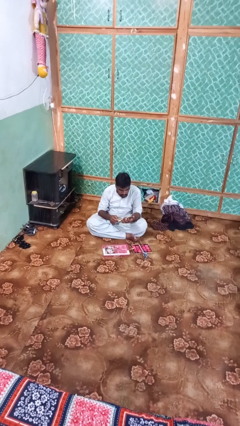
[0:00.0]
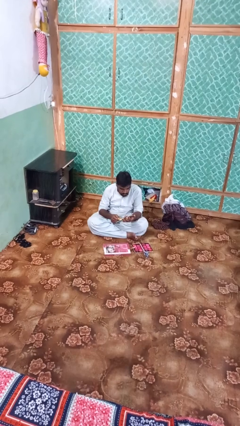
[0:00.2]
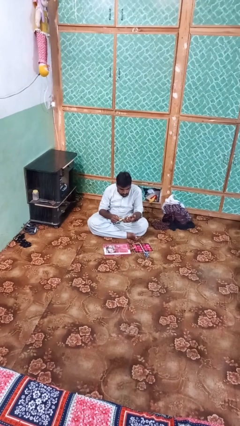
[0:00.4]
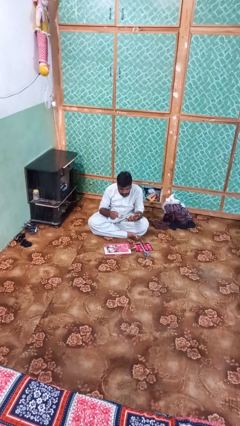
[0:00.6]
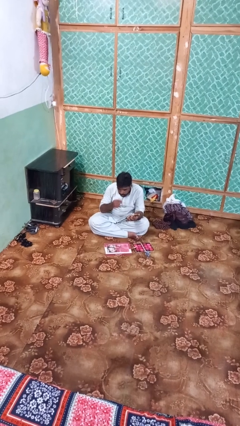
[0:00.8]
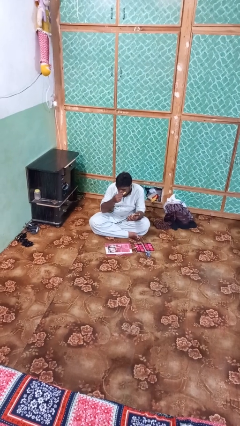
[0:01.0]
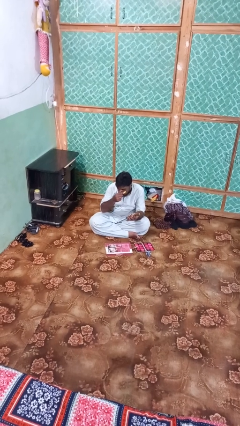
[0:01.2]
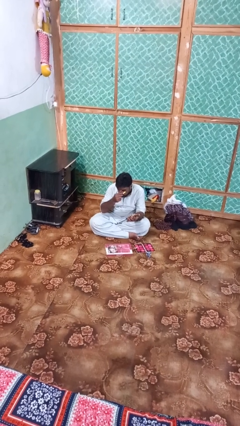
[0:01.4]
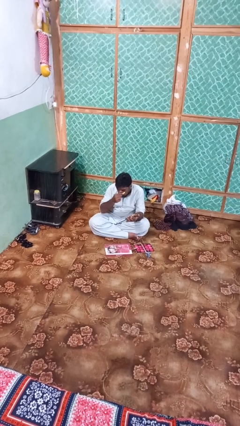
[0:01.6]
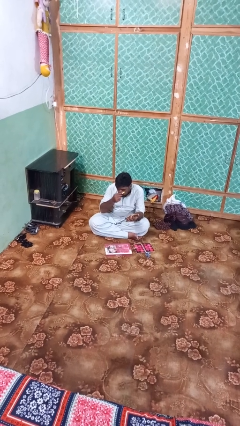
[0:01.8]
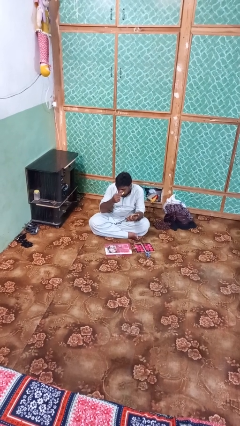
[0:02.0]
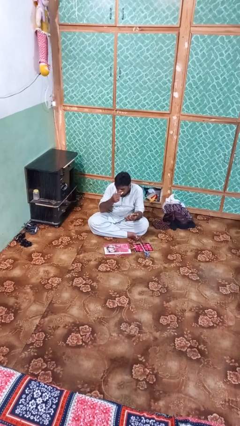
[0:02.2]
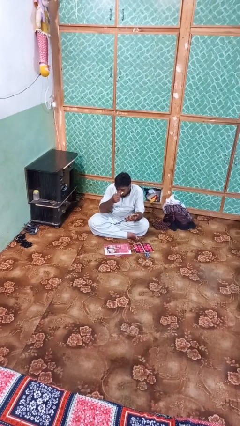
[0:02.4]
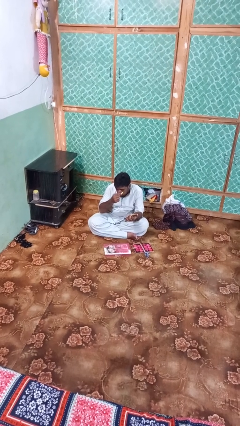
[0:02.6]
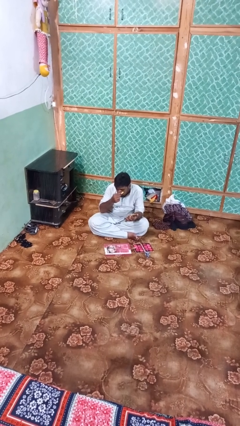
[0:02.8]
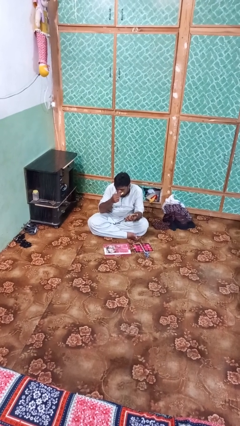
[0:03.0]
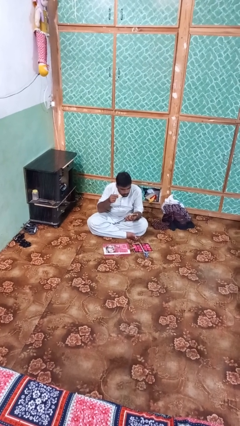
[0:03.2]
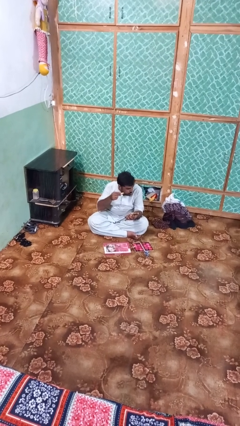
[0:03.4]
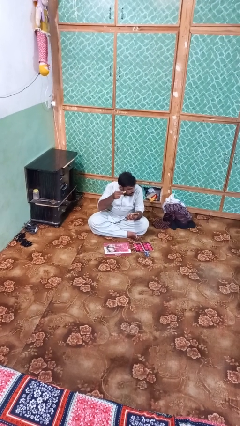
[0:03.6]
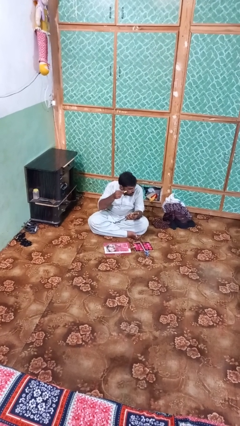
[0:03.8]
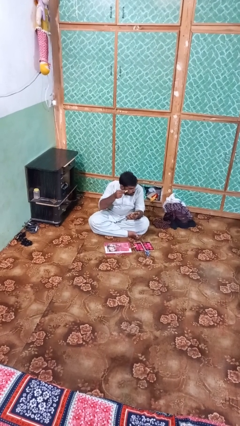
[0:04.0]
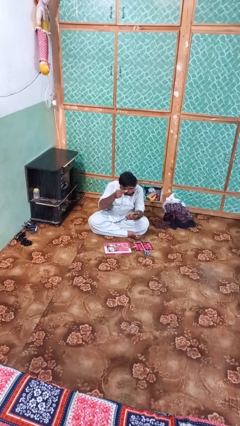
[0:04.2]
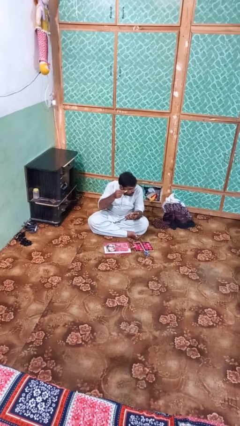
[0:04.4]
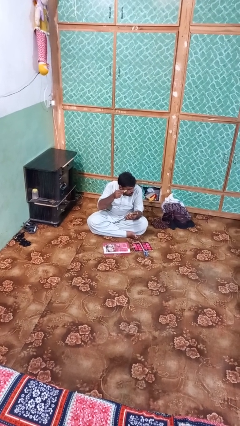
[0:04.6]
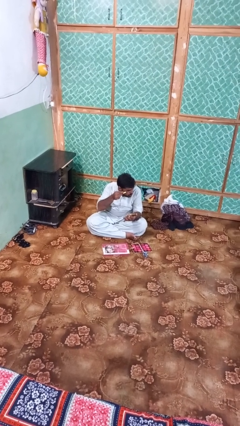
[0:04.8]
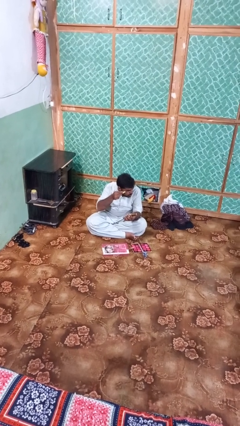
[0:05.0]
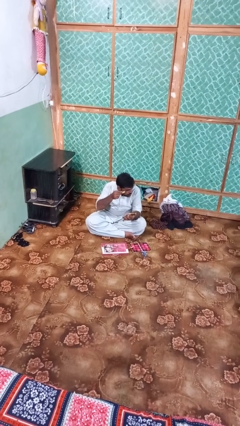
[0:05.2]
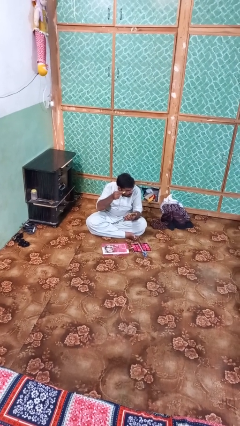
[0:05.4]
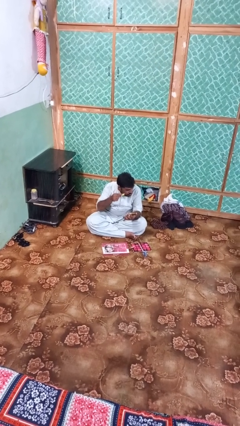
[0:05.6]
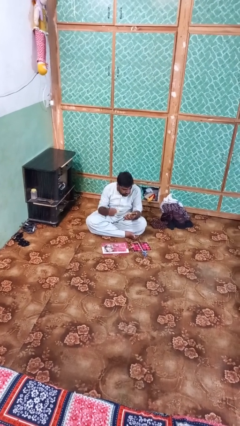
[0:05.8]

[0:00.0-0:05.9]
person applies eye makeup

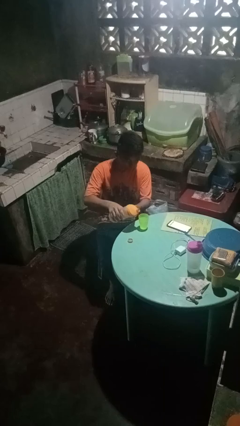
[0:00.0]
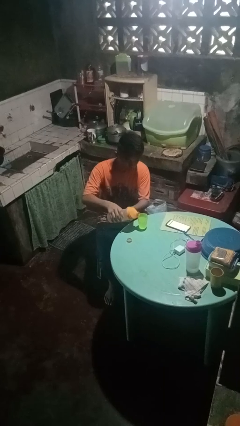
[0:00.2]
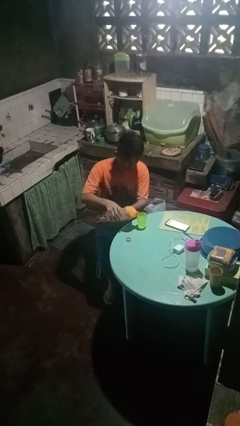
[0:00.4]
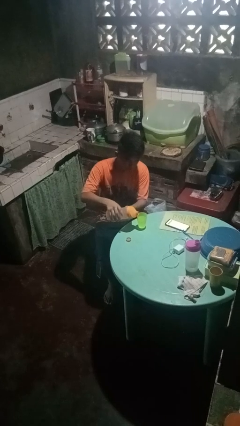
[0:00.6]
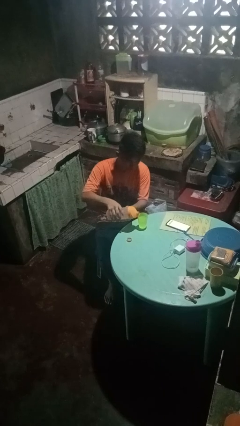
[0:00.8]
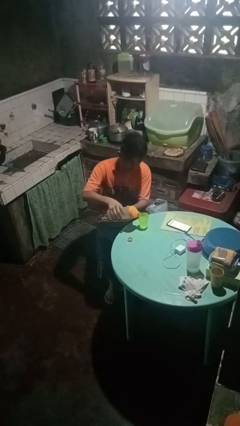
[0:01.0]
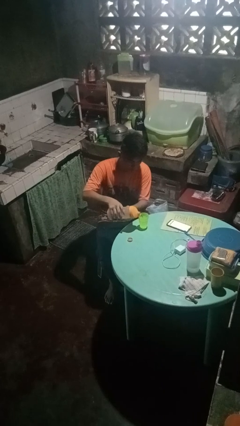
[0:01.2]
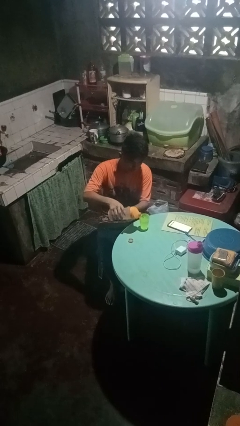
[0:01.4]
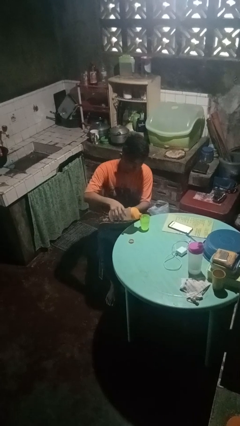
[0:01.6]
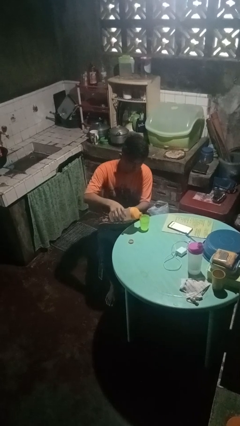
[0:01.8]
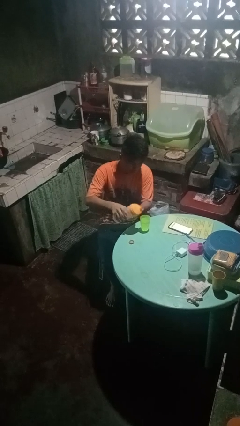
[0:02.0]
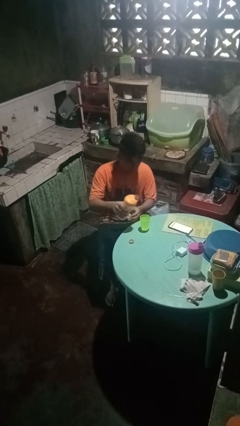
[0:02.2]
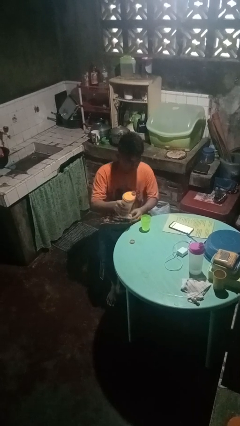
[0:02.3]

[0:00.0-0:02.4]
person pours liquid into cup

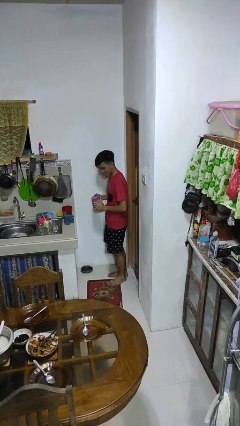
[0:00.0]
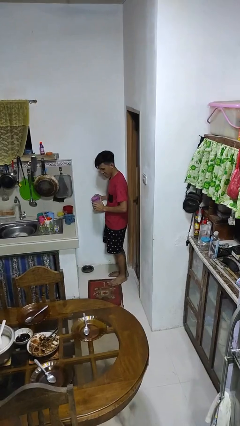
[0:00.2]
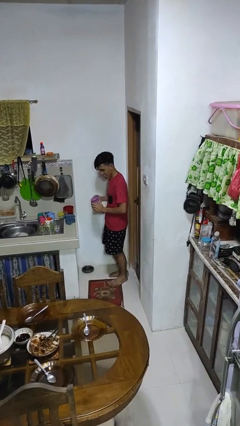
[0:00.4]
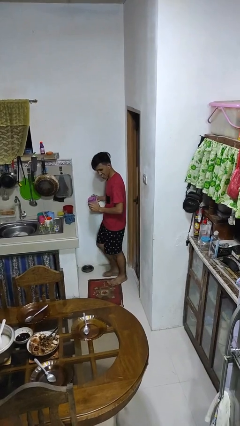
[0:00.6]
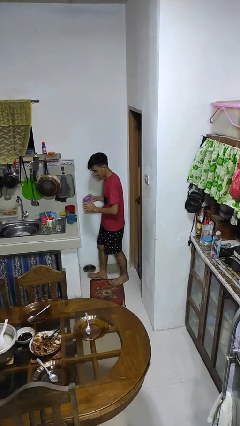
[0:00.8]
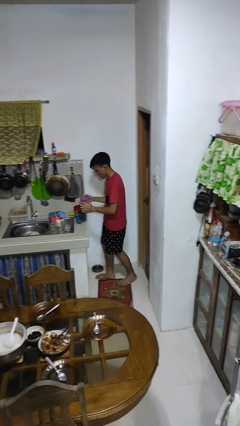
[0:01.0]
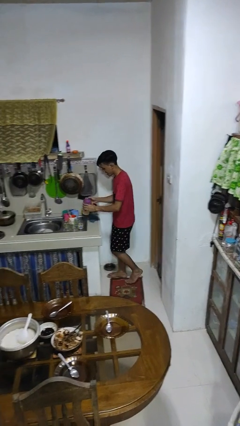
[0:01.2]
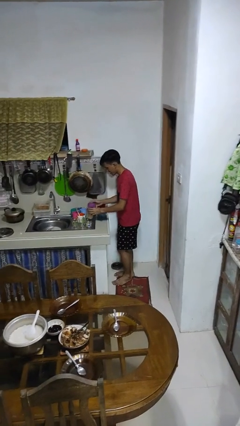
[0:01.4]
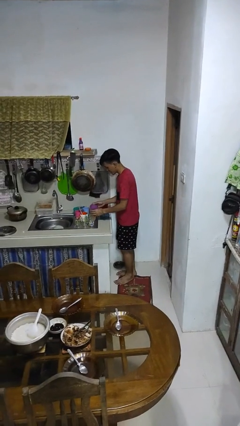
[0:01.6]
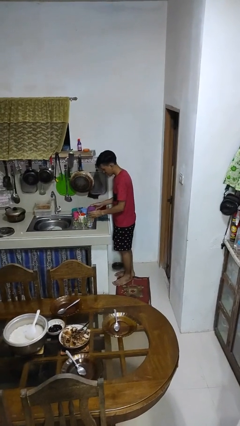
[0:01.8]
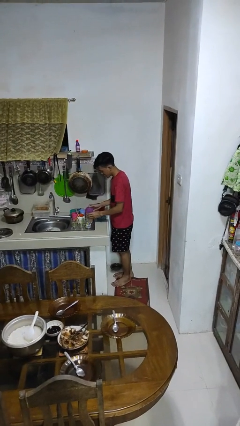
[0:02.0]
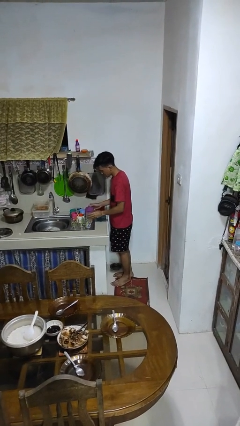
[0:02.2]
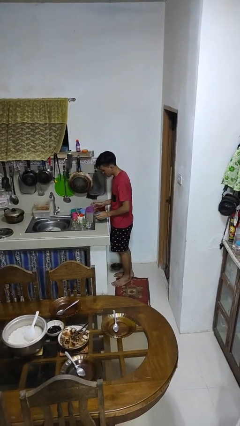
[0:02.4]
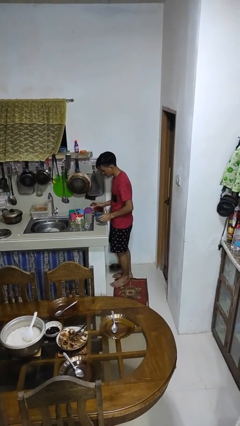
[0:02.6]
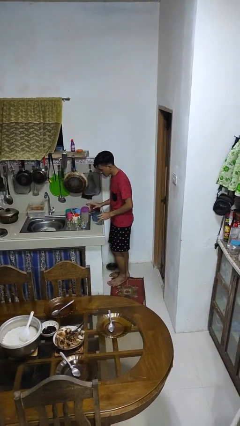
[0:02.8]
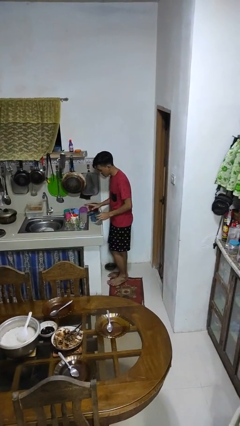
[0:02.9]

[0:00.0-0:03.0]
person puts down object on countertop

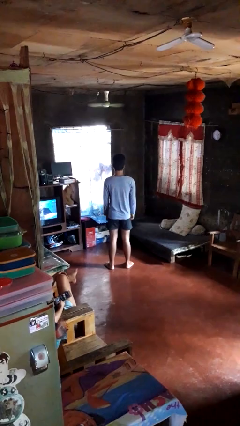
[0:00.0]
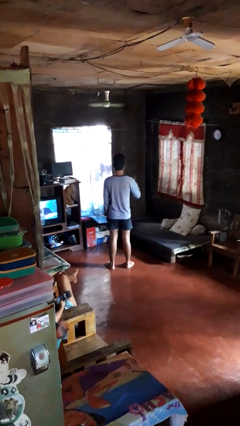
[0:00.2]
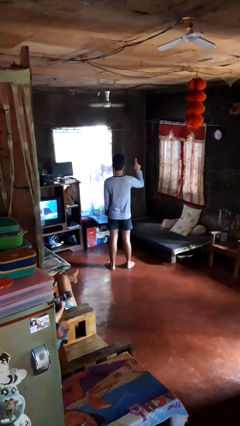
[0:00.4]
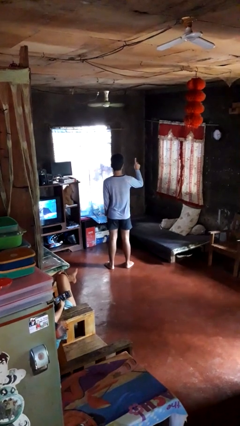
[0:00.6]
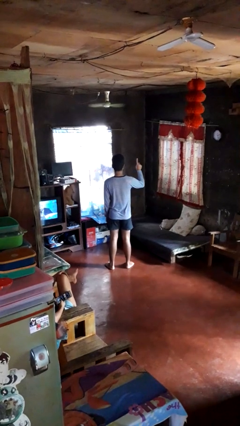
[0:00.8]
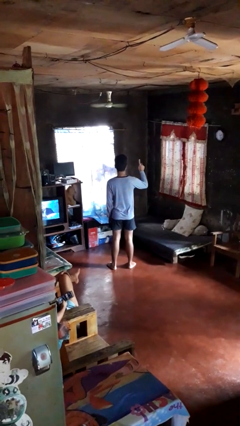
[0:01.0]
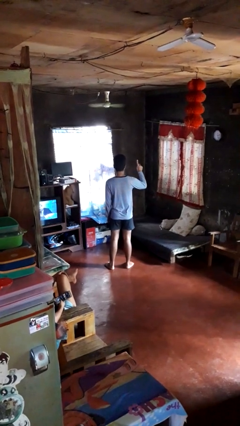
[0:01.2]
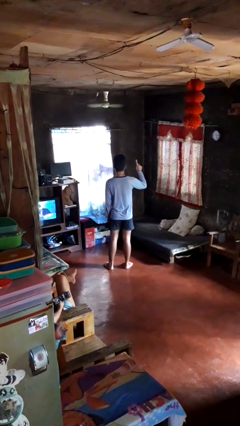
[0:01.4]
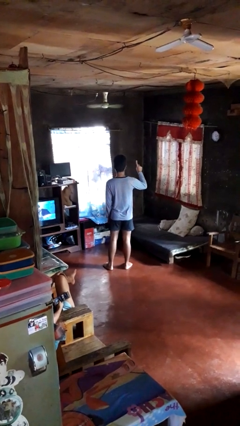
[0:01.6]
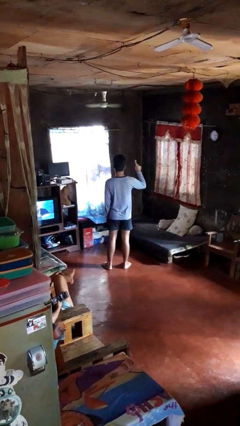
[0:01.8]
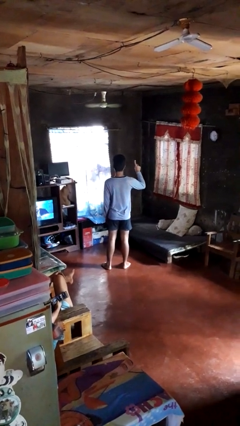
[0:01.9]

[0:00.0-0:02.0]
person gestures number one

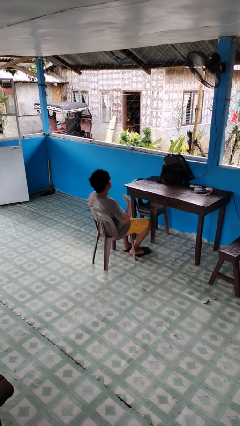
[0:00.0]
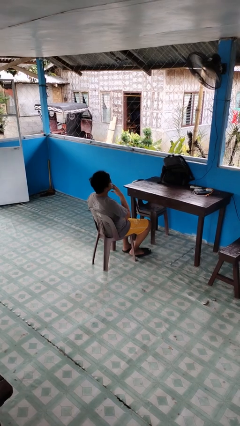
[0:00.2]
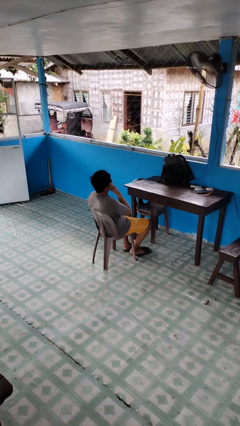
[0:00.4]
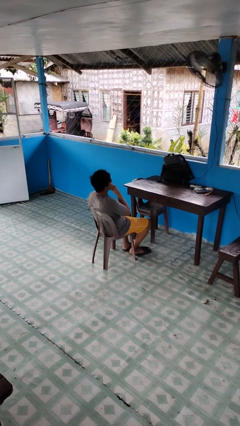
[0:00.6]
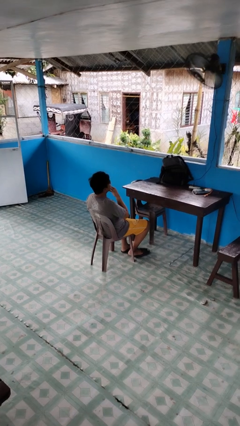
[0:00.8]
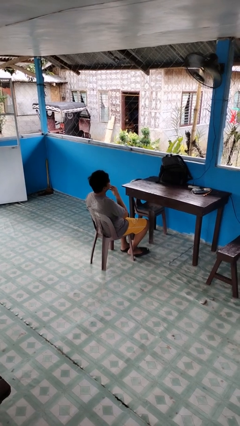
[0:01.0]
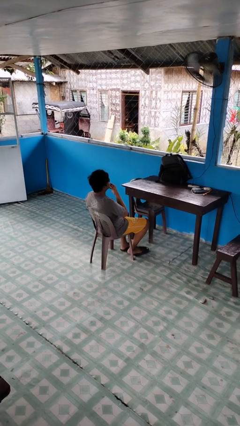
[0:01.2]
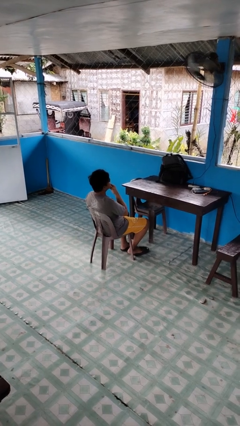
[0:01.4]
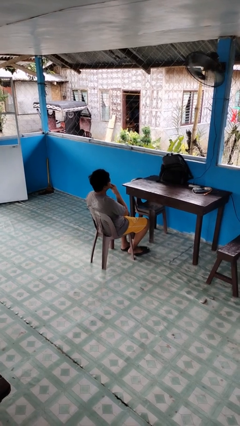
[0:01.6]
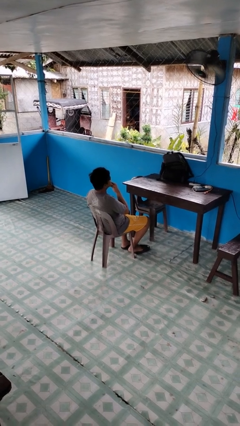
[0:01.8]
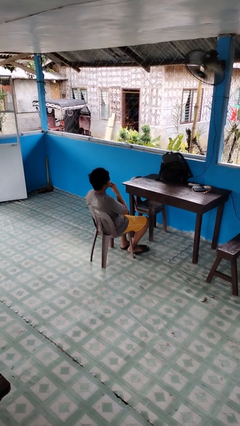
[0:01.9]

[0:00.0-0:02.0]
person strokes chin

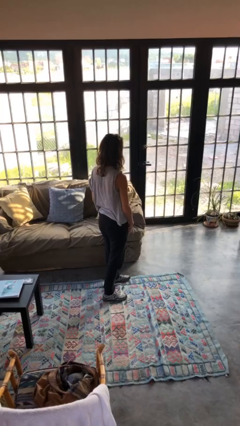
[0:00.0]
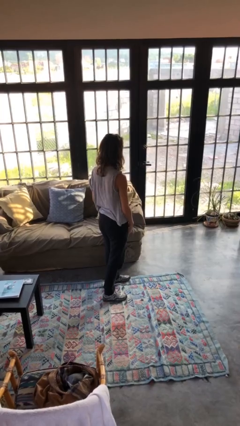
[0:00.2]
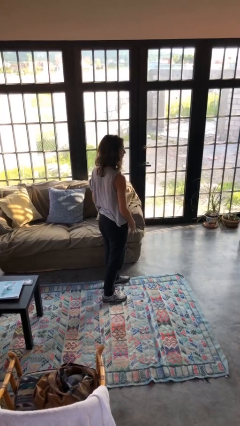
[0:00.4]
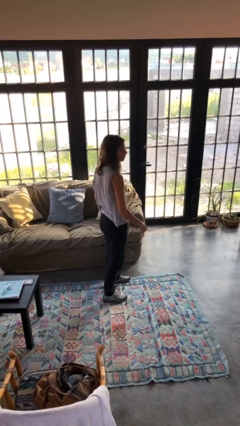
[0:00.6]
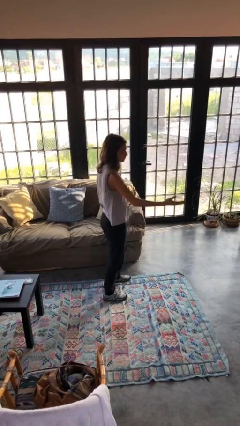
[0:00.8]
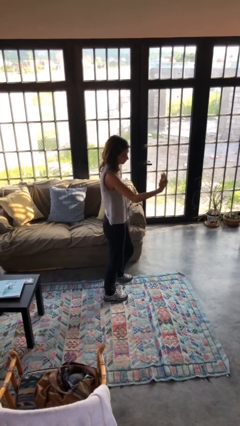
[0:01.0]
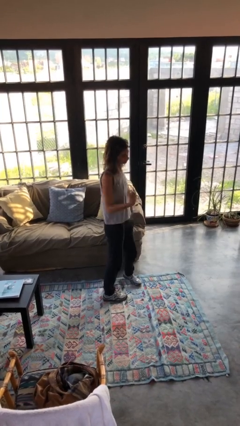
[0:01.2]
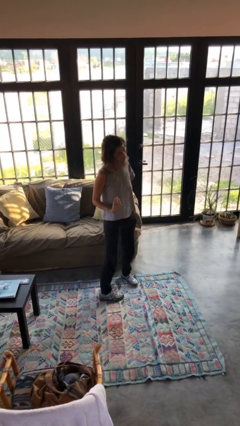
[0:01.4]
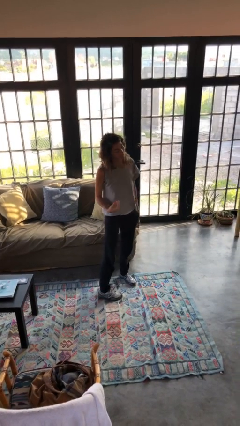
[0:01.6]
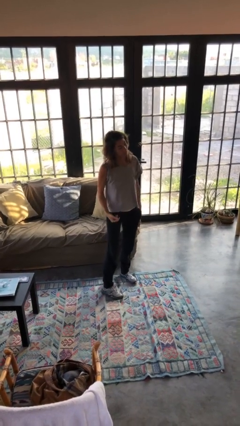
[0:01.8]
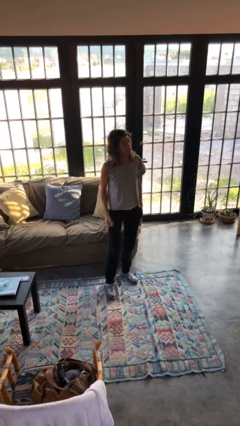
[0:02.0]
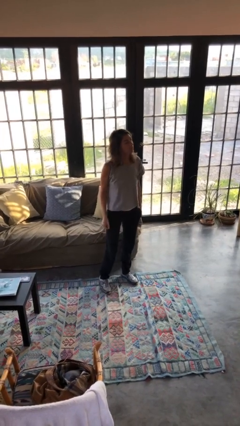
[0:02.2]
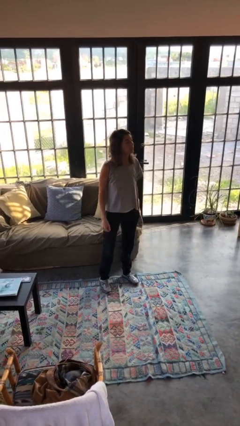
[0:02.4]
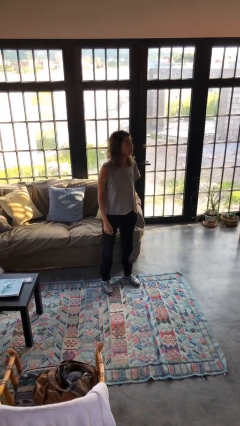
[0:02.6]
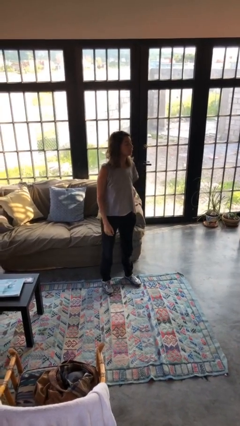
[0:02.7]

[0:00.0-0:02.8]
person gestures come here
